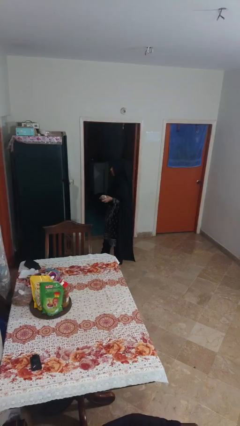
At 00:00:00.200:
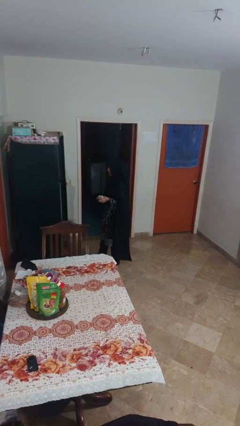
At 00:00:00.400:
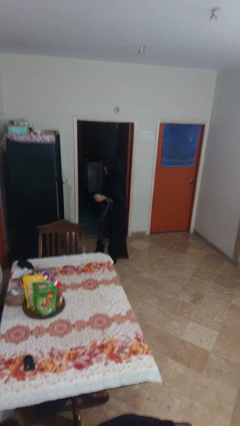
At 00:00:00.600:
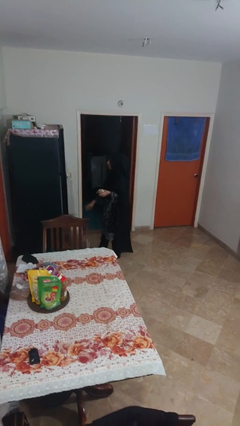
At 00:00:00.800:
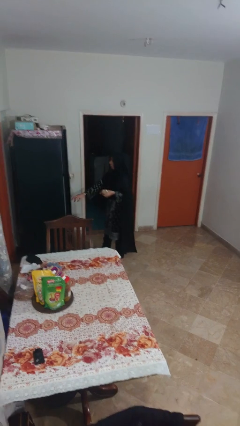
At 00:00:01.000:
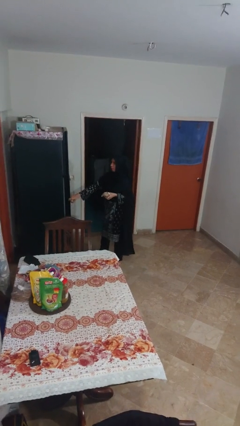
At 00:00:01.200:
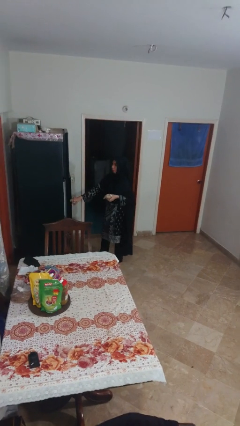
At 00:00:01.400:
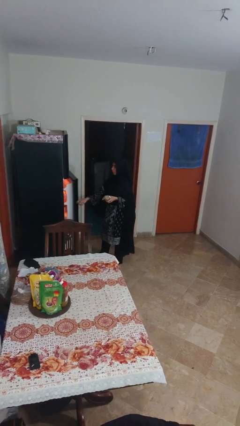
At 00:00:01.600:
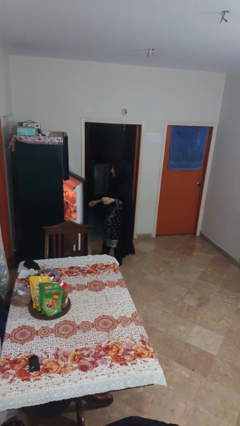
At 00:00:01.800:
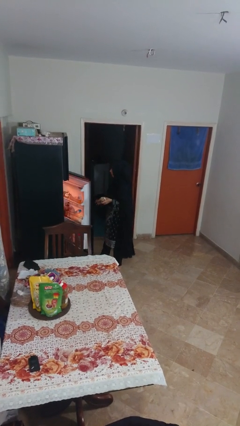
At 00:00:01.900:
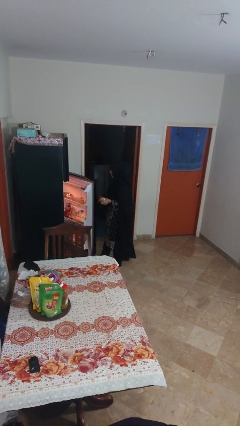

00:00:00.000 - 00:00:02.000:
person opens refrigerator

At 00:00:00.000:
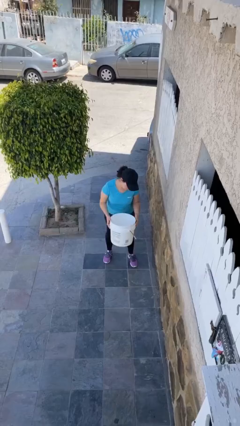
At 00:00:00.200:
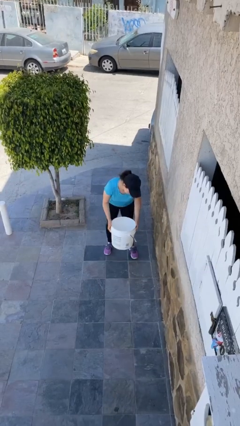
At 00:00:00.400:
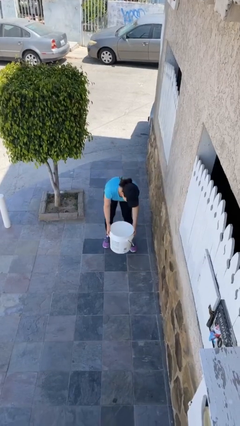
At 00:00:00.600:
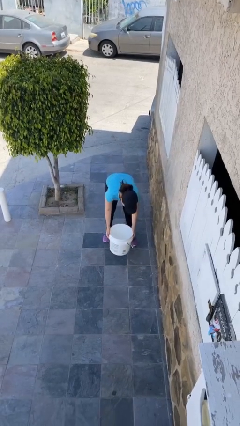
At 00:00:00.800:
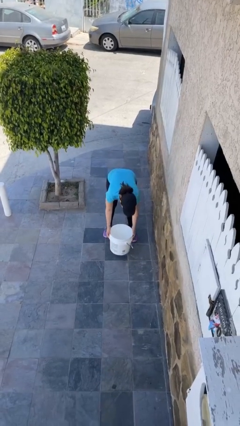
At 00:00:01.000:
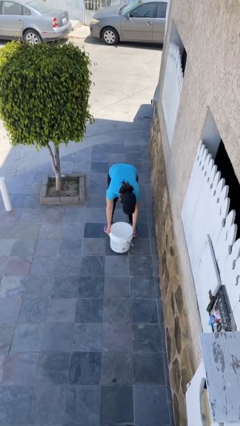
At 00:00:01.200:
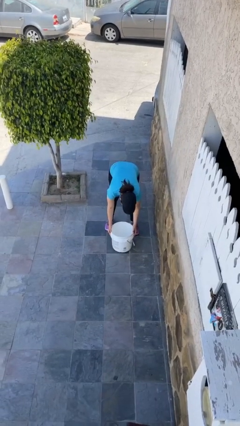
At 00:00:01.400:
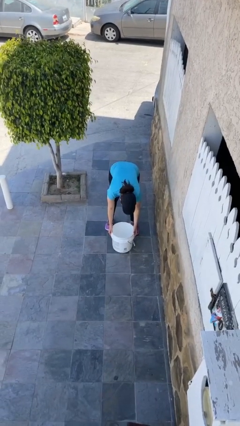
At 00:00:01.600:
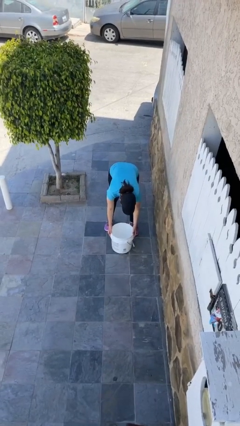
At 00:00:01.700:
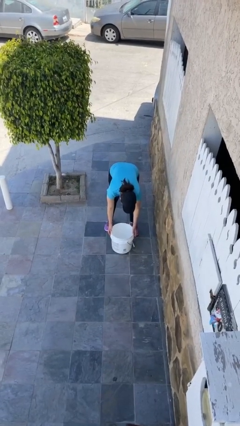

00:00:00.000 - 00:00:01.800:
person puts down object on floor

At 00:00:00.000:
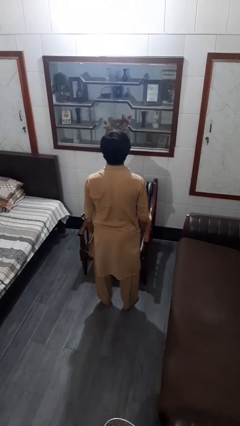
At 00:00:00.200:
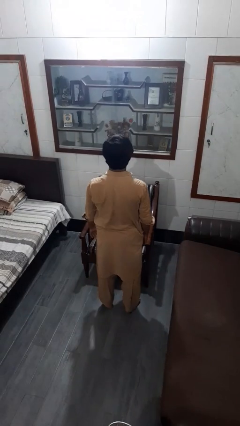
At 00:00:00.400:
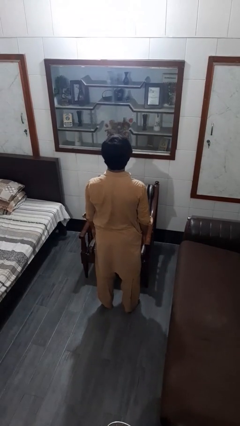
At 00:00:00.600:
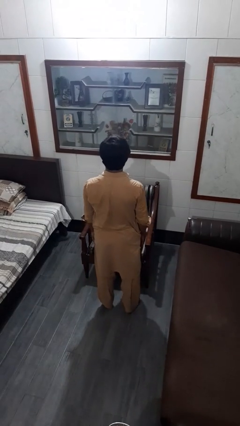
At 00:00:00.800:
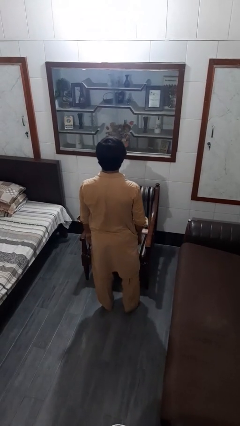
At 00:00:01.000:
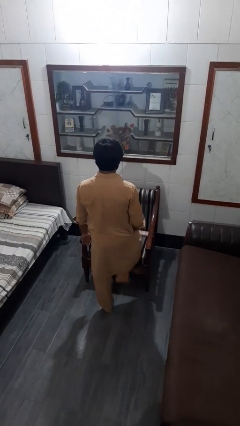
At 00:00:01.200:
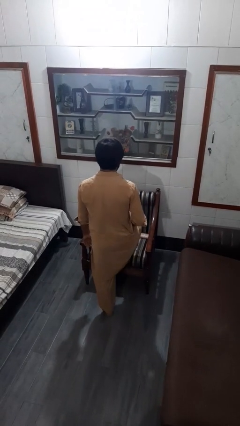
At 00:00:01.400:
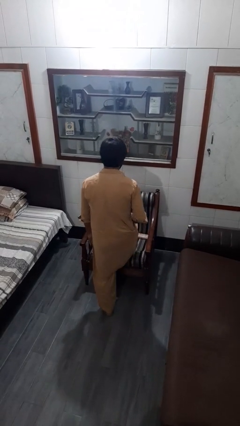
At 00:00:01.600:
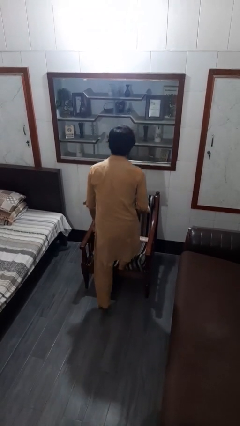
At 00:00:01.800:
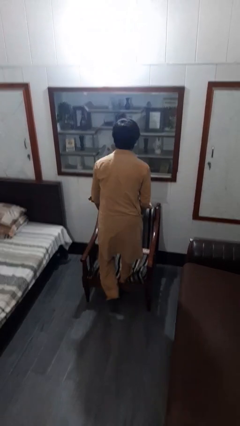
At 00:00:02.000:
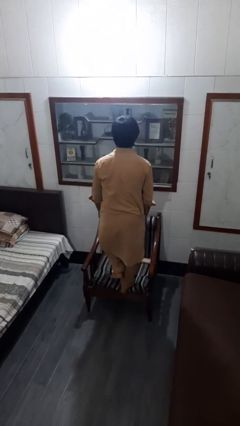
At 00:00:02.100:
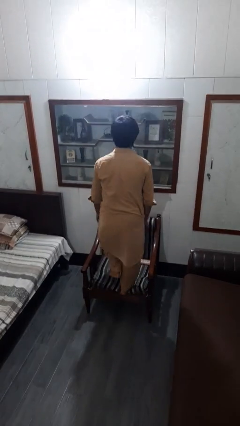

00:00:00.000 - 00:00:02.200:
person climbs on chair
